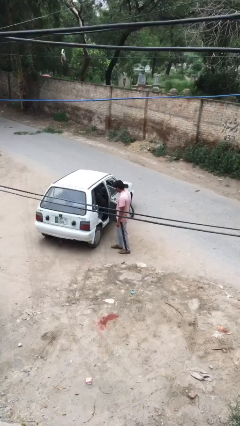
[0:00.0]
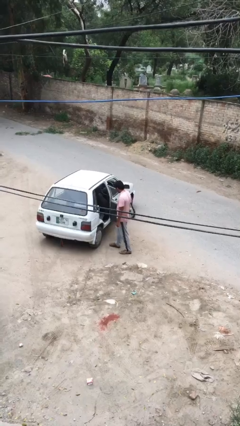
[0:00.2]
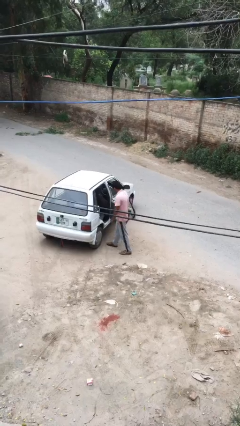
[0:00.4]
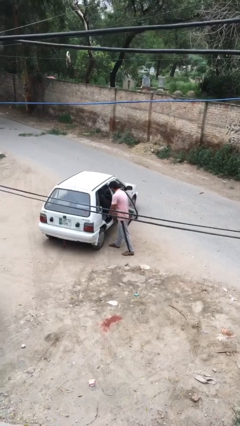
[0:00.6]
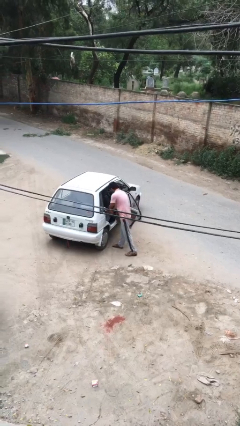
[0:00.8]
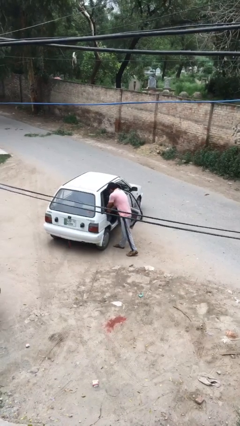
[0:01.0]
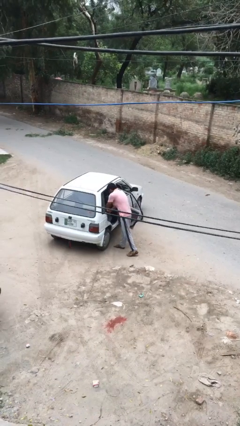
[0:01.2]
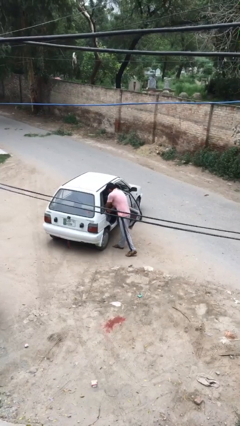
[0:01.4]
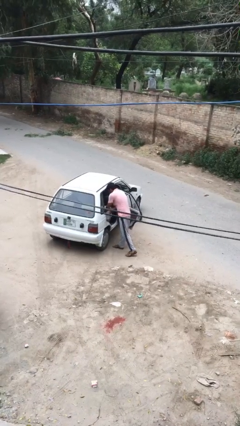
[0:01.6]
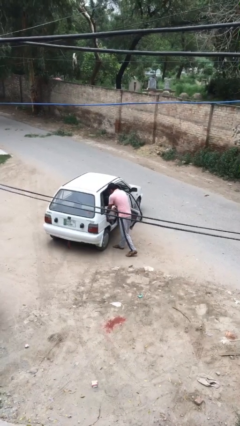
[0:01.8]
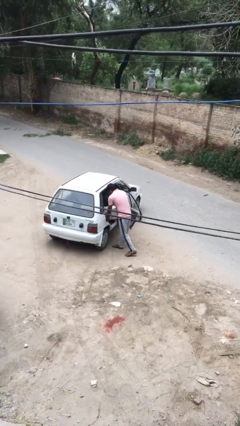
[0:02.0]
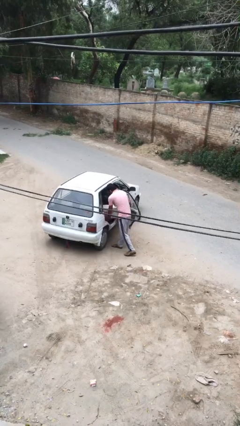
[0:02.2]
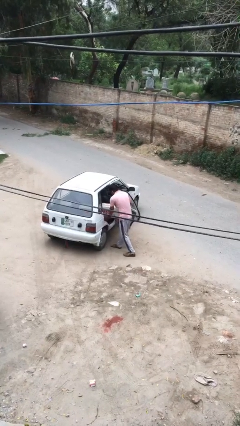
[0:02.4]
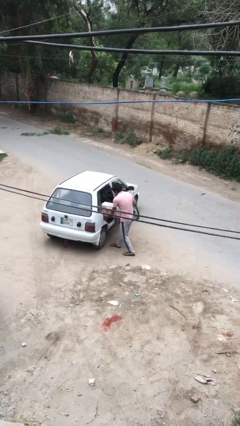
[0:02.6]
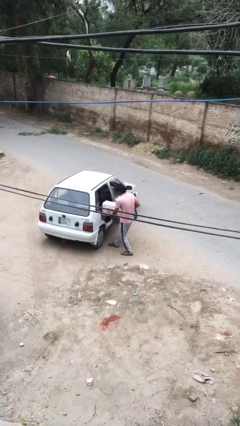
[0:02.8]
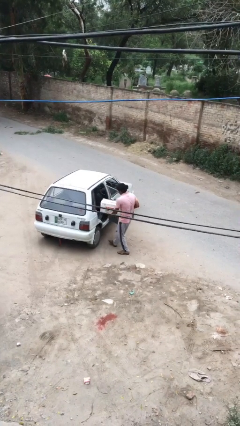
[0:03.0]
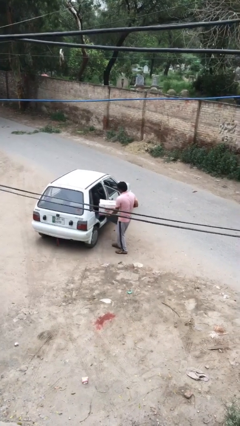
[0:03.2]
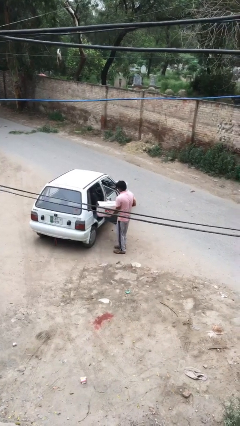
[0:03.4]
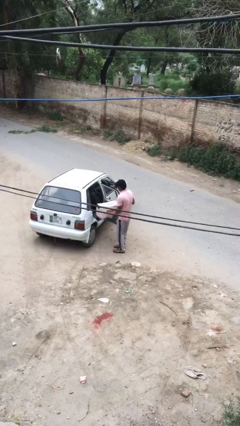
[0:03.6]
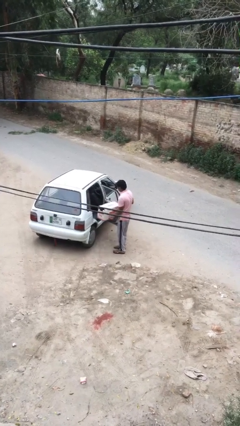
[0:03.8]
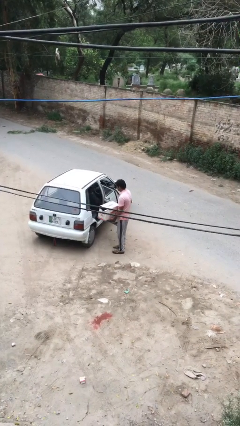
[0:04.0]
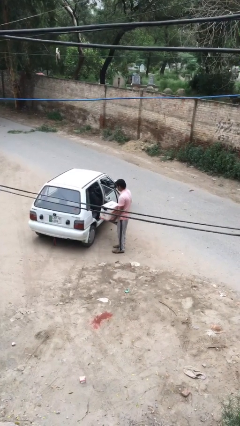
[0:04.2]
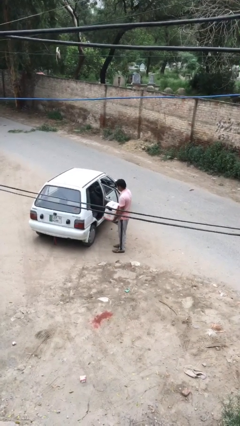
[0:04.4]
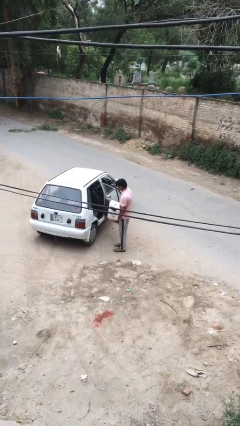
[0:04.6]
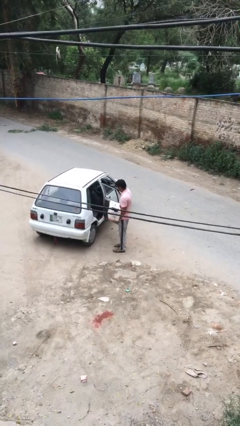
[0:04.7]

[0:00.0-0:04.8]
person unloads car

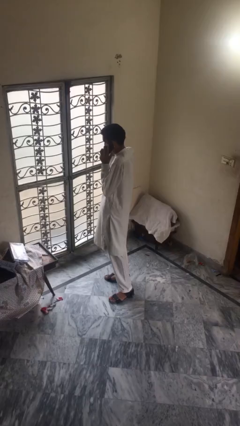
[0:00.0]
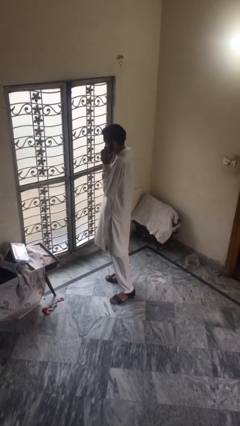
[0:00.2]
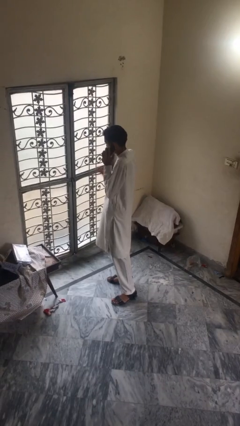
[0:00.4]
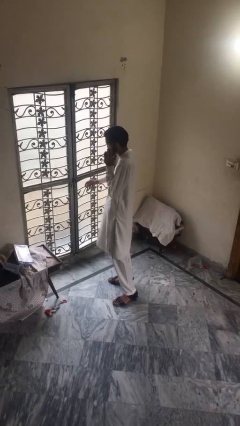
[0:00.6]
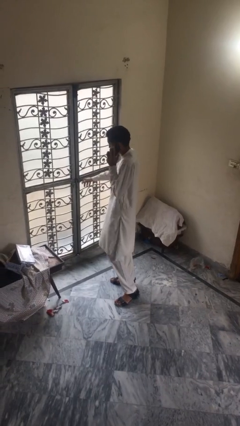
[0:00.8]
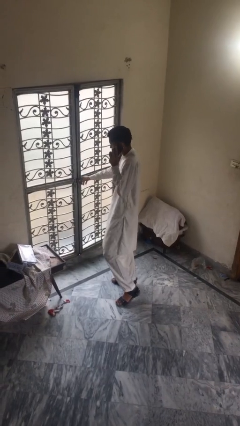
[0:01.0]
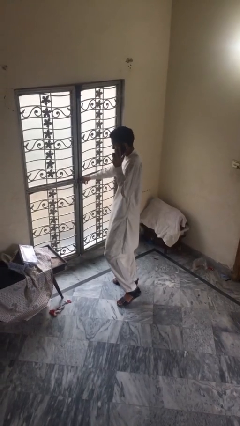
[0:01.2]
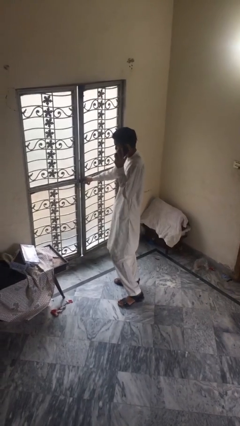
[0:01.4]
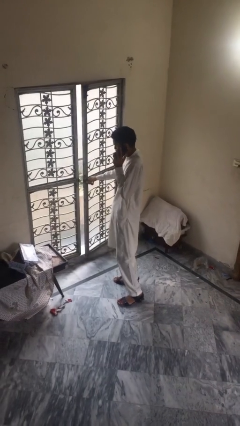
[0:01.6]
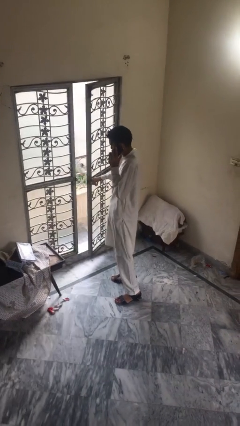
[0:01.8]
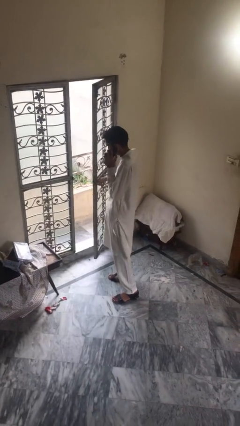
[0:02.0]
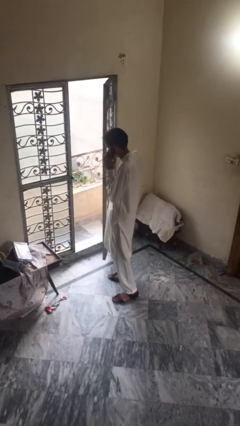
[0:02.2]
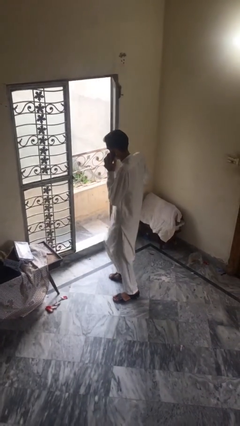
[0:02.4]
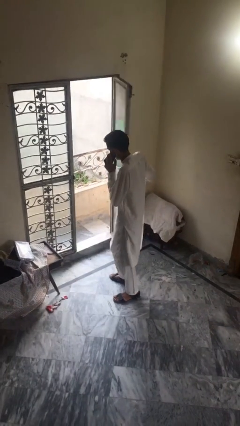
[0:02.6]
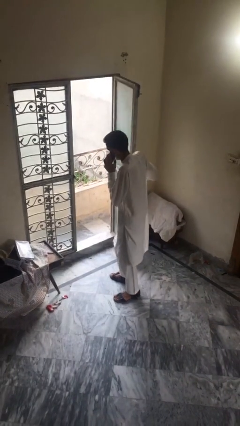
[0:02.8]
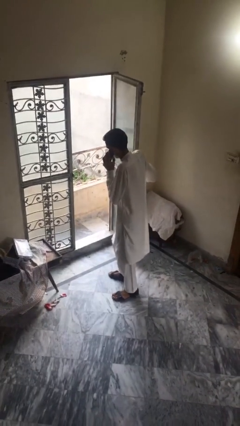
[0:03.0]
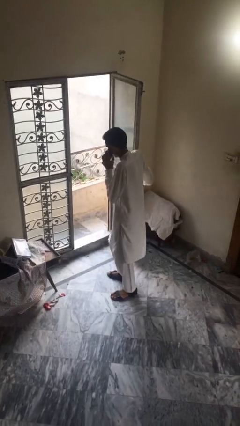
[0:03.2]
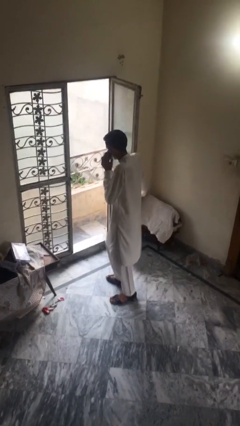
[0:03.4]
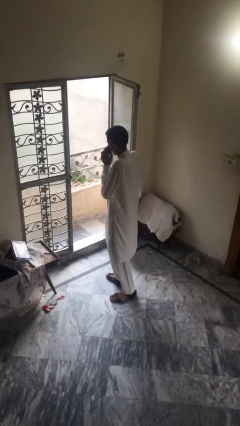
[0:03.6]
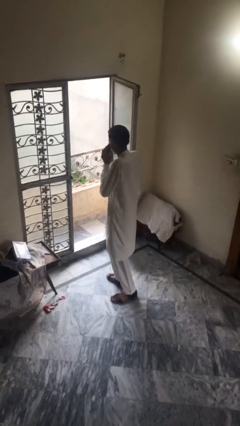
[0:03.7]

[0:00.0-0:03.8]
person opens facility door

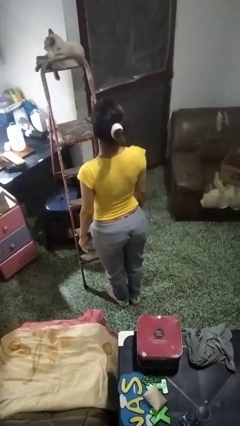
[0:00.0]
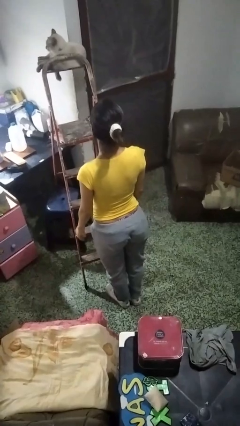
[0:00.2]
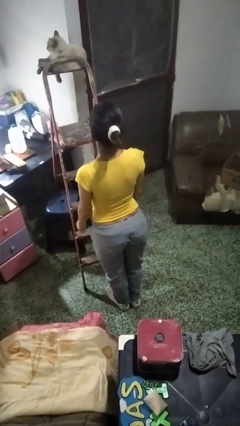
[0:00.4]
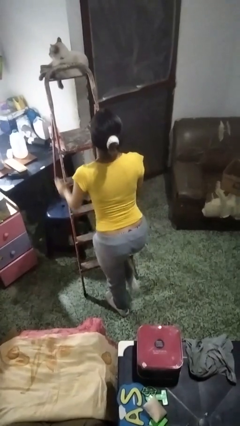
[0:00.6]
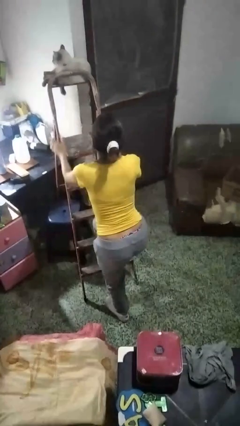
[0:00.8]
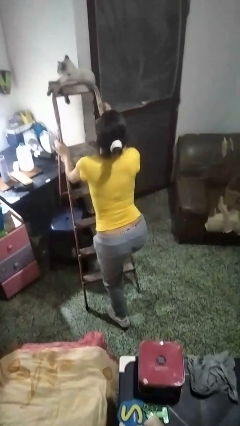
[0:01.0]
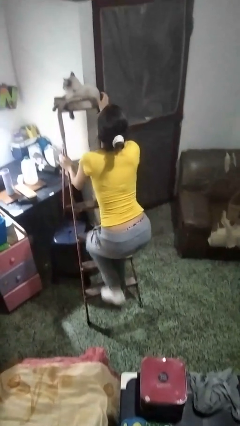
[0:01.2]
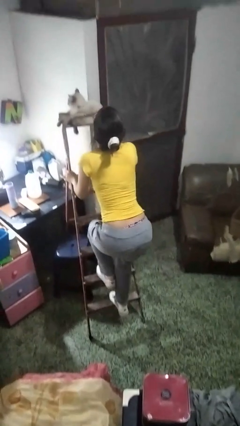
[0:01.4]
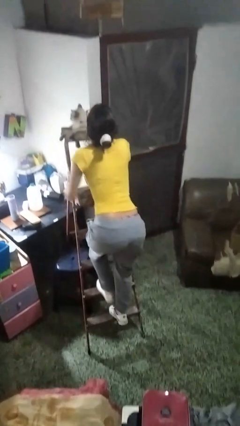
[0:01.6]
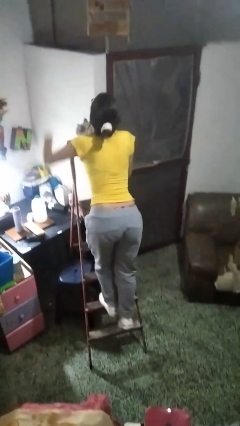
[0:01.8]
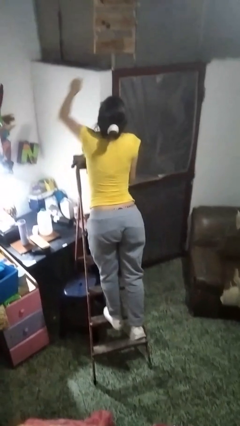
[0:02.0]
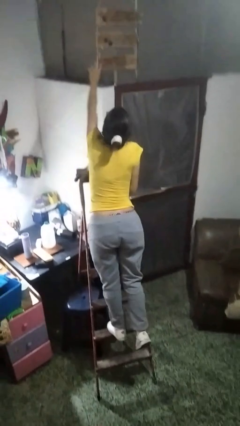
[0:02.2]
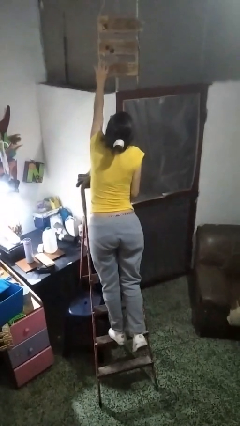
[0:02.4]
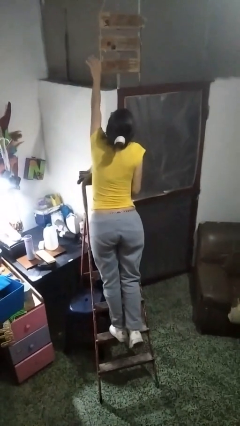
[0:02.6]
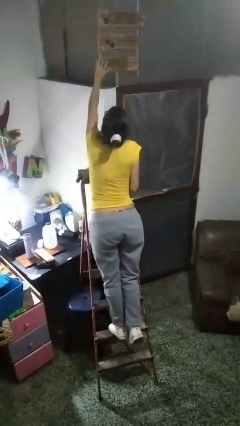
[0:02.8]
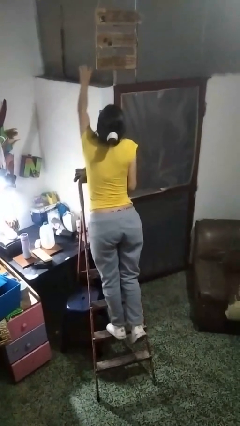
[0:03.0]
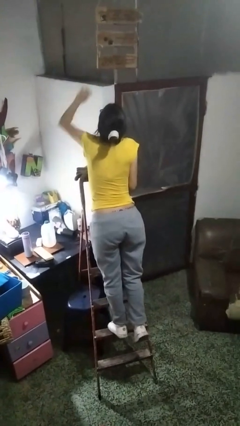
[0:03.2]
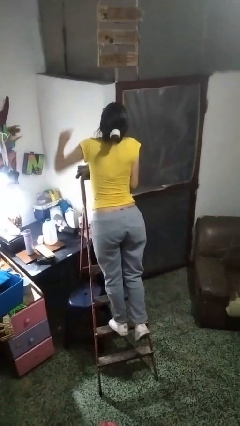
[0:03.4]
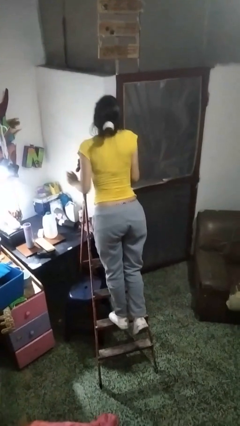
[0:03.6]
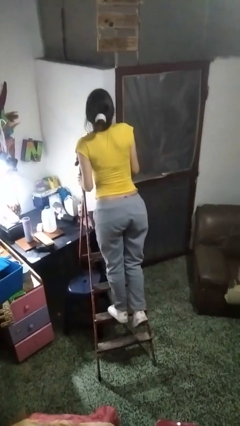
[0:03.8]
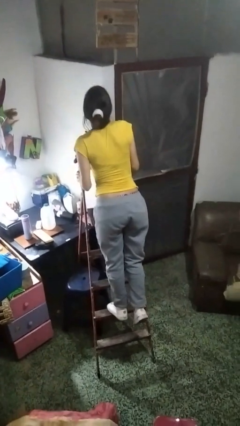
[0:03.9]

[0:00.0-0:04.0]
person climbs up ladder

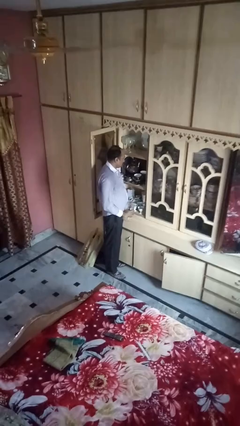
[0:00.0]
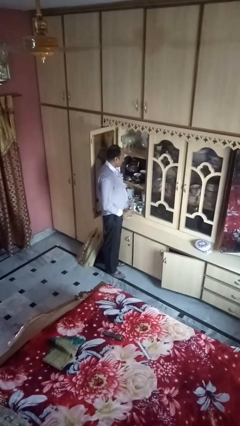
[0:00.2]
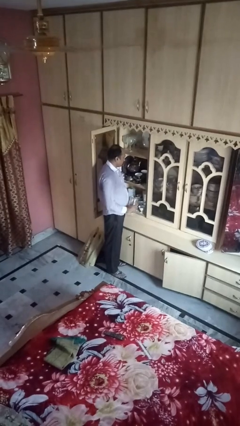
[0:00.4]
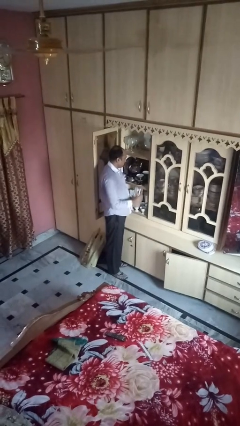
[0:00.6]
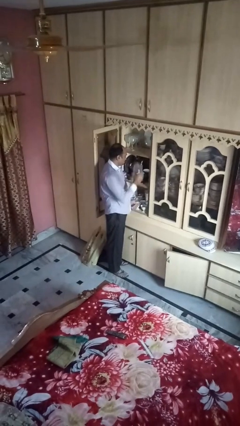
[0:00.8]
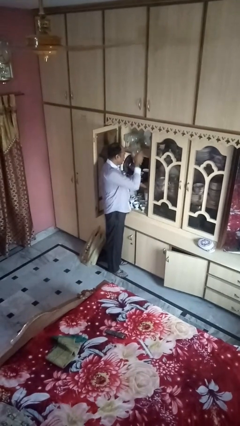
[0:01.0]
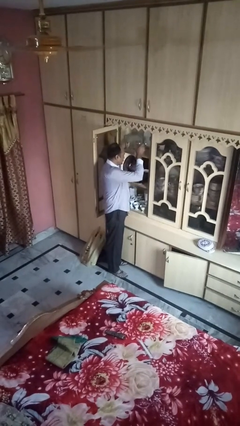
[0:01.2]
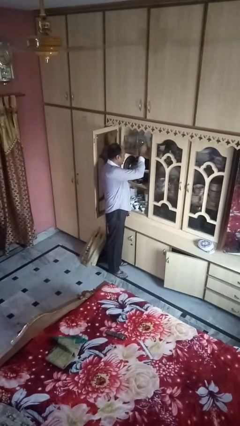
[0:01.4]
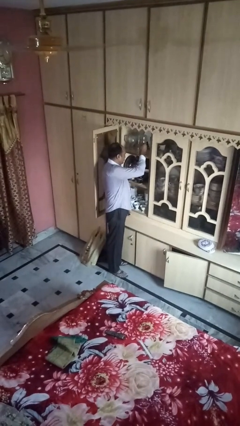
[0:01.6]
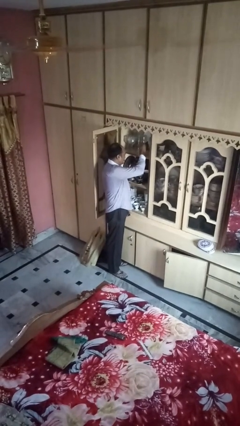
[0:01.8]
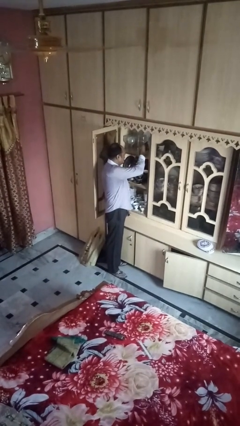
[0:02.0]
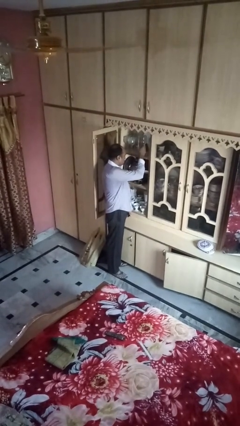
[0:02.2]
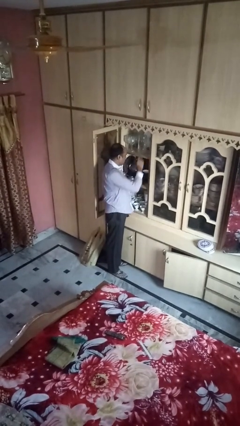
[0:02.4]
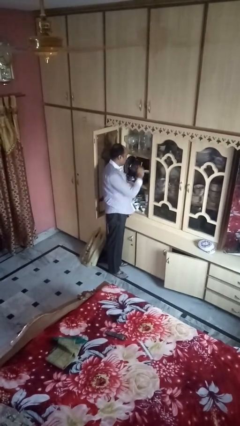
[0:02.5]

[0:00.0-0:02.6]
person puts down object into cabinet

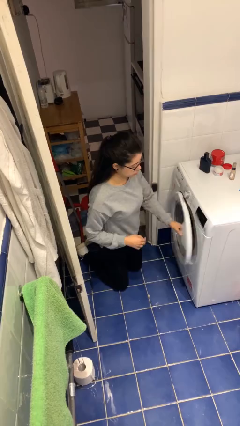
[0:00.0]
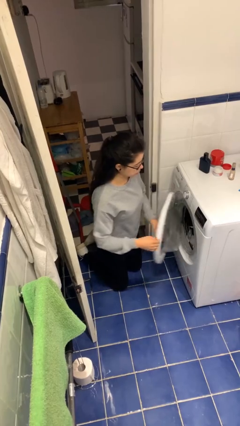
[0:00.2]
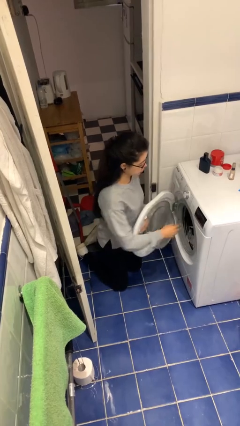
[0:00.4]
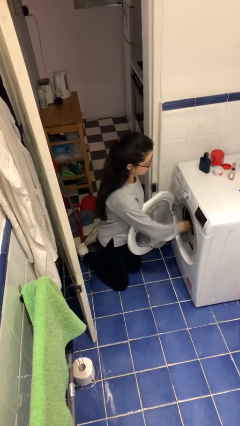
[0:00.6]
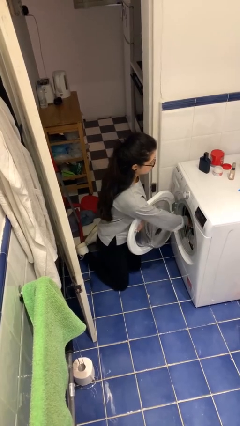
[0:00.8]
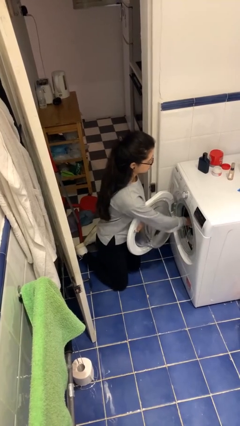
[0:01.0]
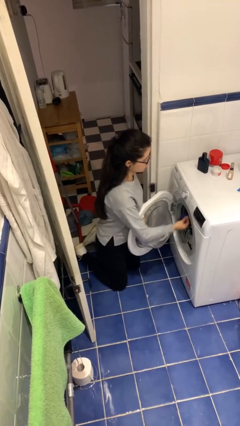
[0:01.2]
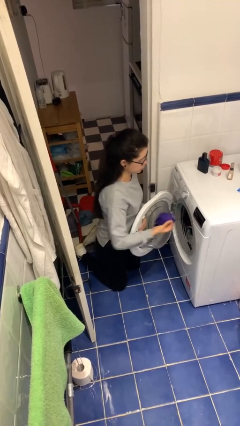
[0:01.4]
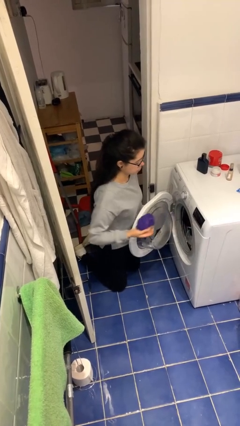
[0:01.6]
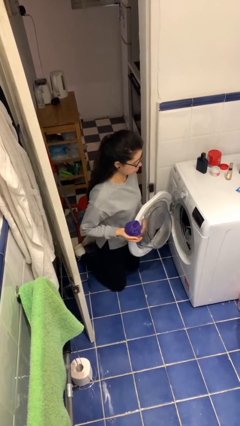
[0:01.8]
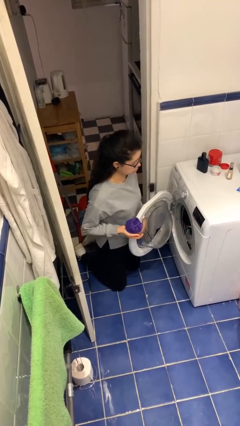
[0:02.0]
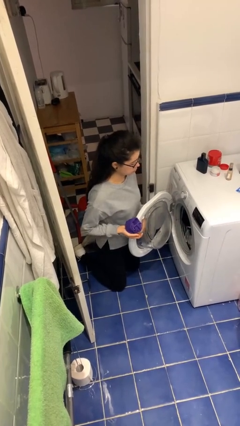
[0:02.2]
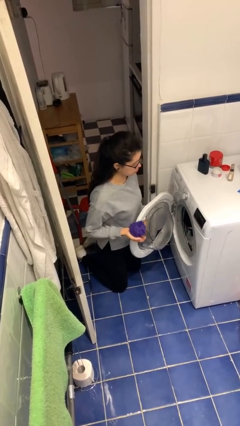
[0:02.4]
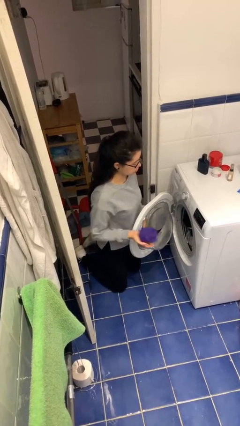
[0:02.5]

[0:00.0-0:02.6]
person unloads clotheswasher
